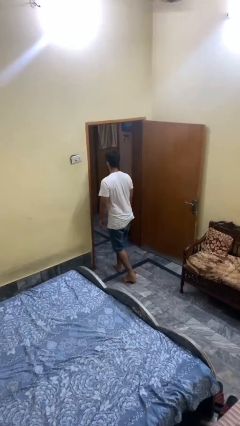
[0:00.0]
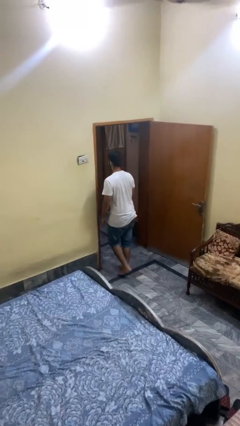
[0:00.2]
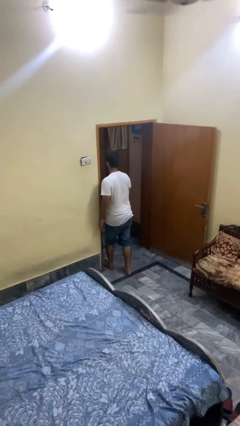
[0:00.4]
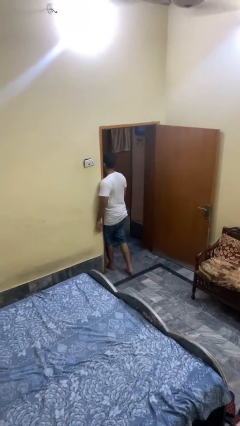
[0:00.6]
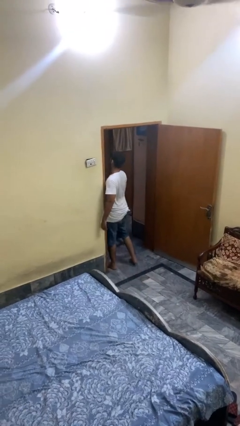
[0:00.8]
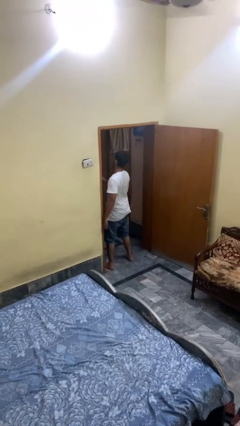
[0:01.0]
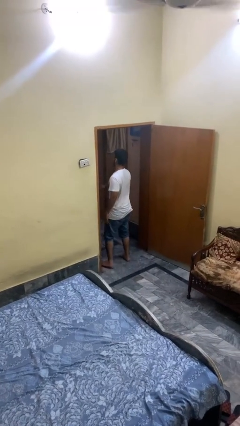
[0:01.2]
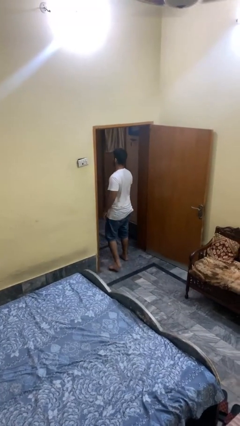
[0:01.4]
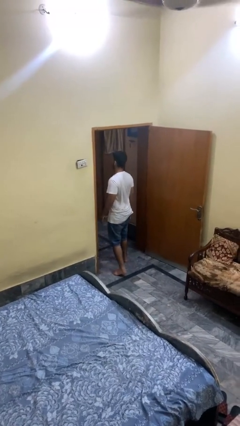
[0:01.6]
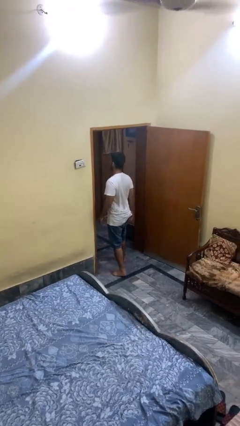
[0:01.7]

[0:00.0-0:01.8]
person bumps into wall

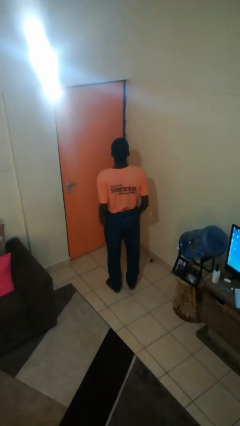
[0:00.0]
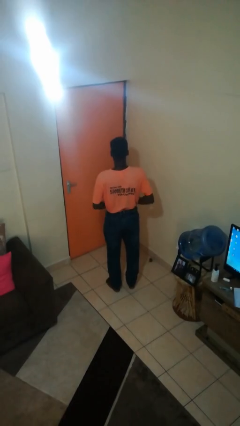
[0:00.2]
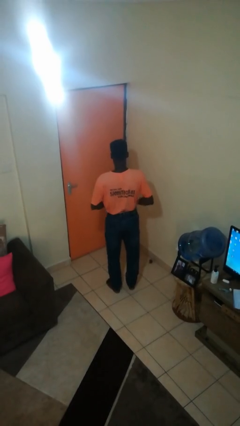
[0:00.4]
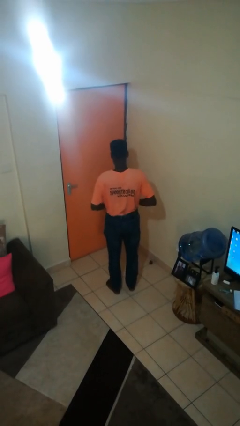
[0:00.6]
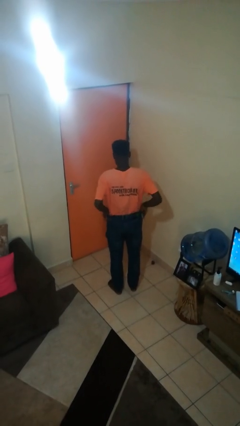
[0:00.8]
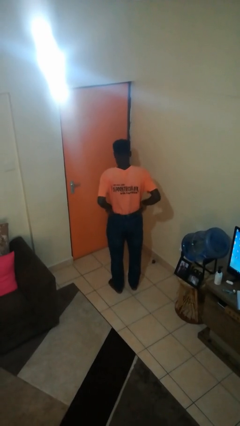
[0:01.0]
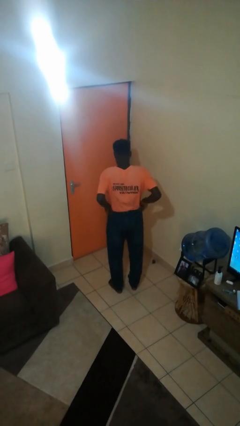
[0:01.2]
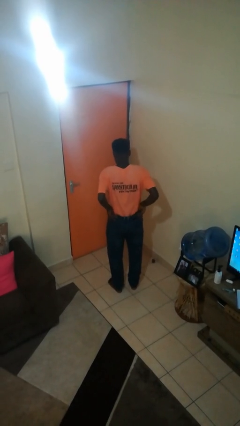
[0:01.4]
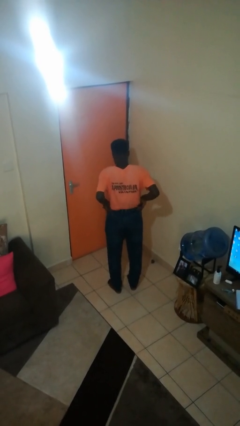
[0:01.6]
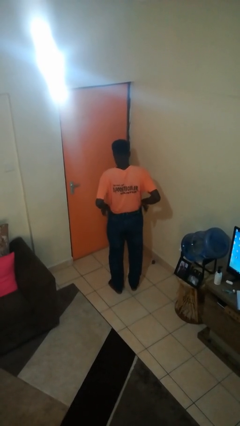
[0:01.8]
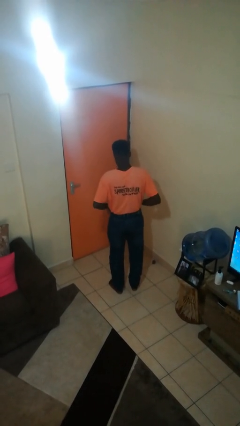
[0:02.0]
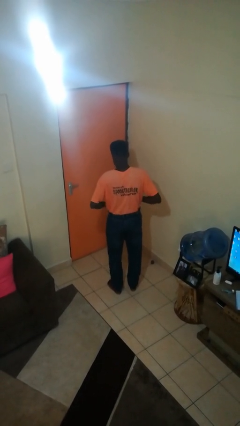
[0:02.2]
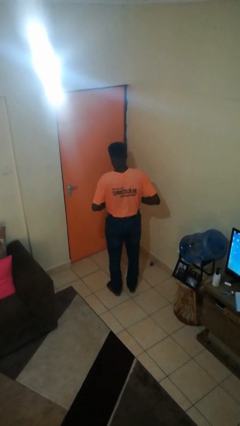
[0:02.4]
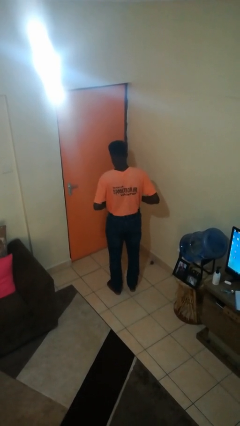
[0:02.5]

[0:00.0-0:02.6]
person hikes up pants

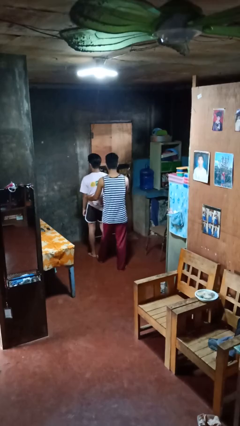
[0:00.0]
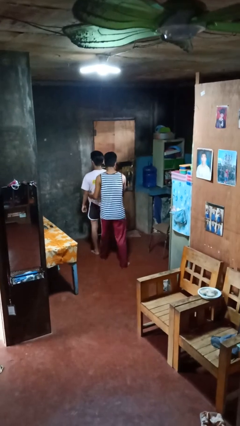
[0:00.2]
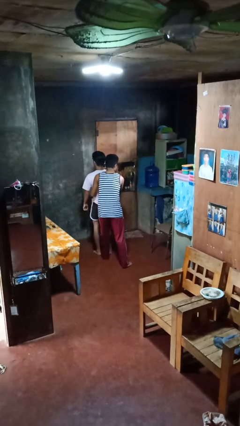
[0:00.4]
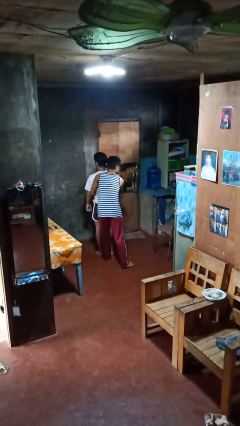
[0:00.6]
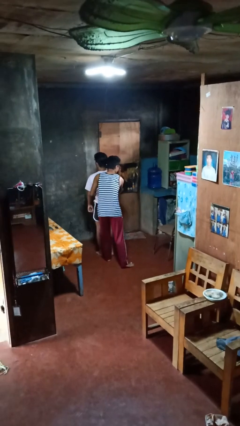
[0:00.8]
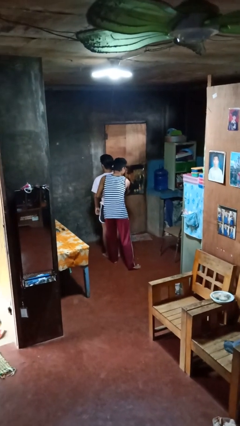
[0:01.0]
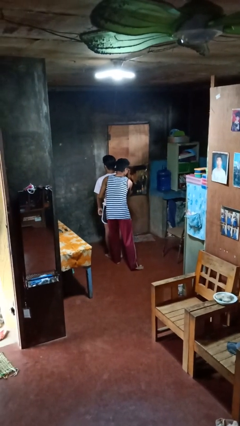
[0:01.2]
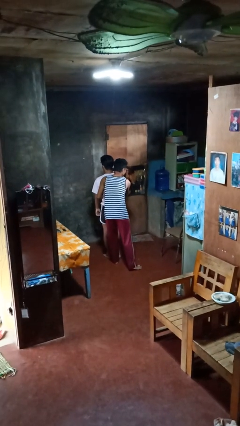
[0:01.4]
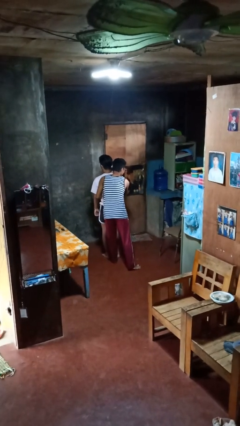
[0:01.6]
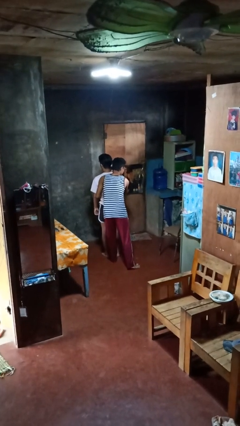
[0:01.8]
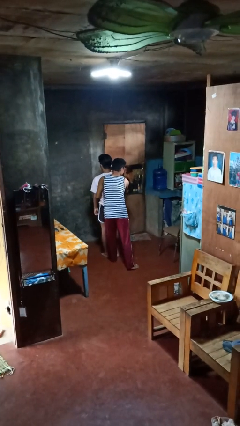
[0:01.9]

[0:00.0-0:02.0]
person hugs person from behind

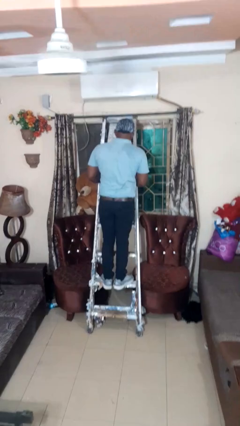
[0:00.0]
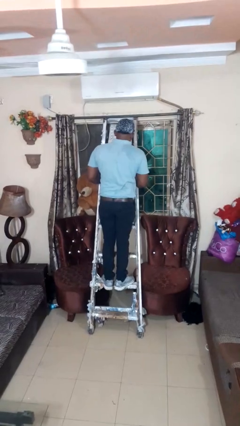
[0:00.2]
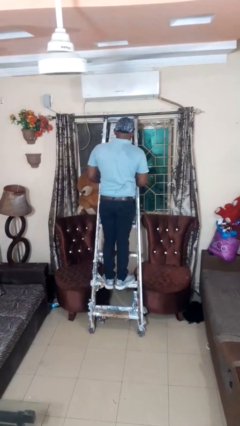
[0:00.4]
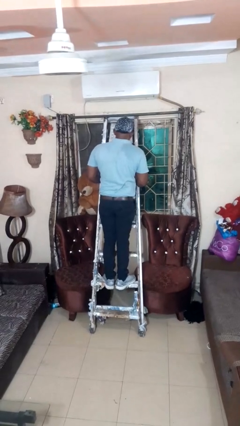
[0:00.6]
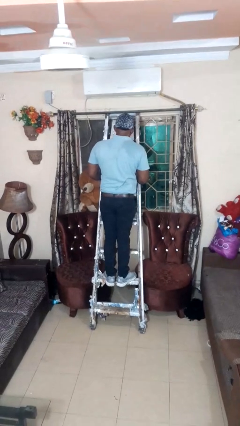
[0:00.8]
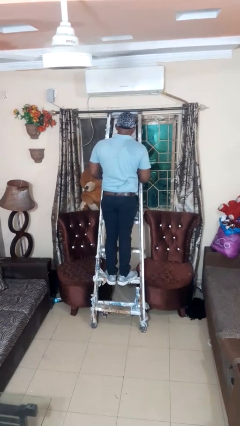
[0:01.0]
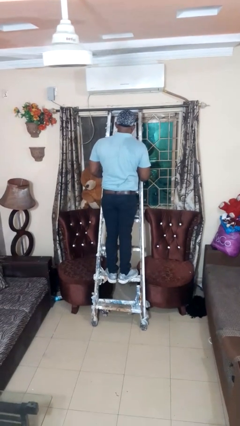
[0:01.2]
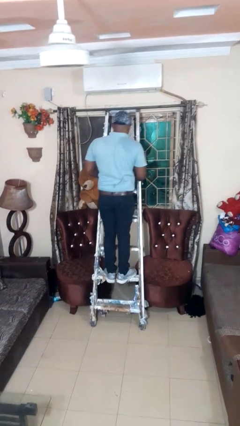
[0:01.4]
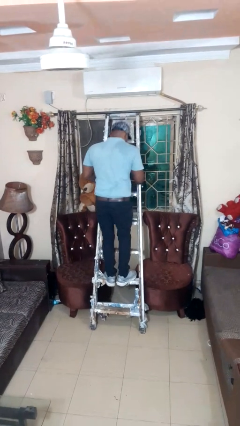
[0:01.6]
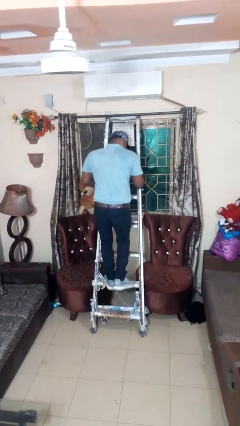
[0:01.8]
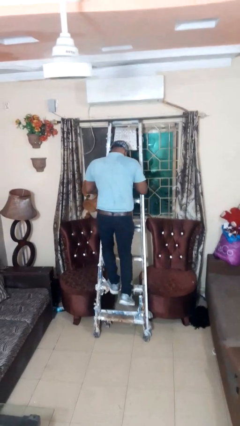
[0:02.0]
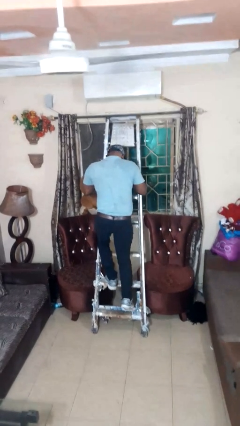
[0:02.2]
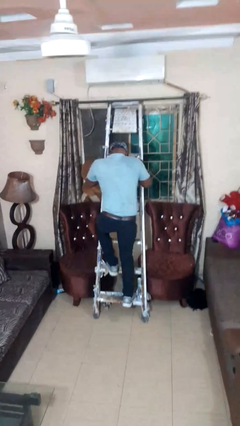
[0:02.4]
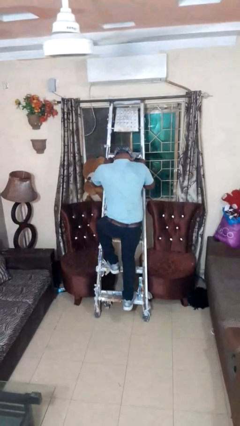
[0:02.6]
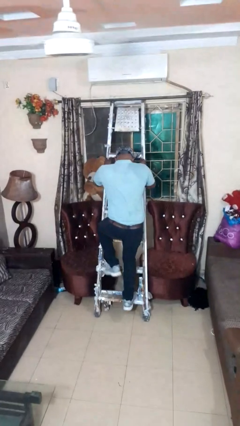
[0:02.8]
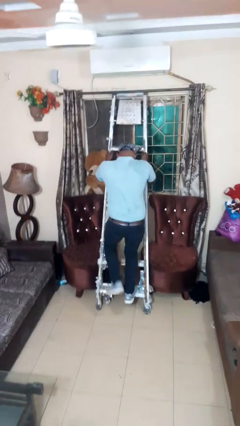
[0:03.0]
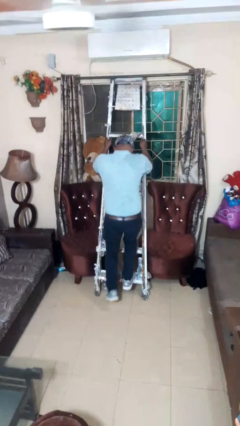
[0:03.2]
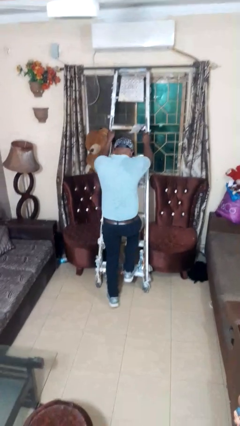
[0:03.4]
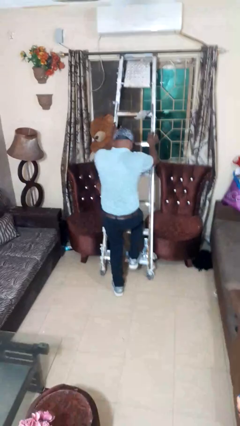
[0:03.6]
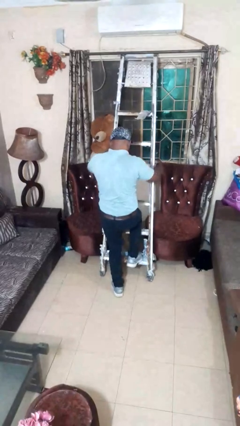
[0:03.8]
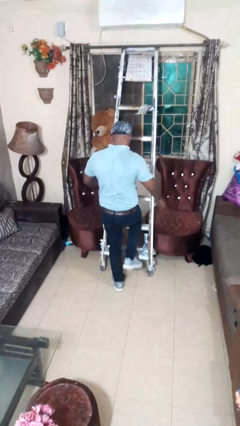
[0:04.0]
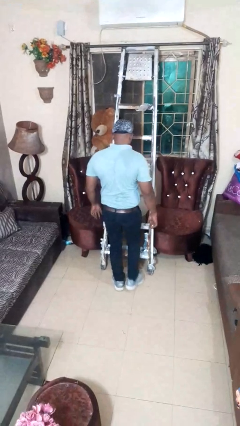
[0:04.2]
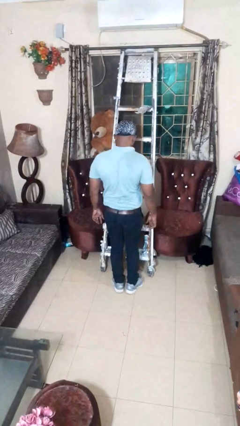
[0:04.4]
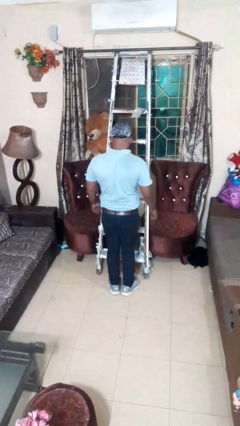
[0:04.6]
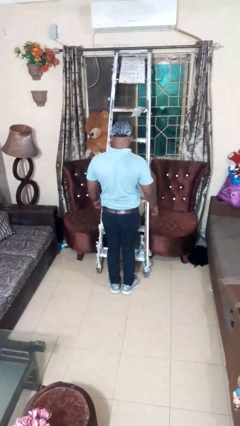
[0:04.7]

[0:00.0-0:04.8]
person climbs down ladder

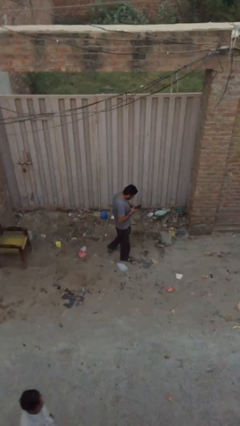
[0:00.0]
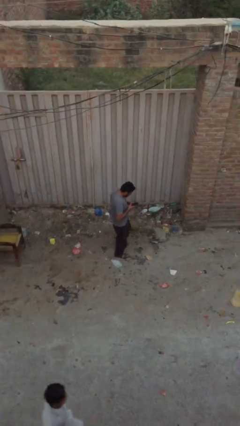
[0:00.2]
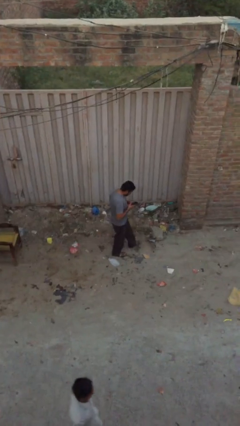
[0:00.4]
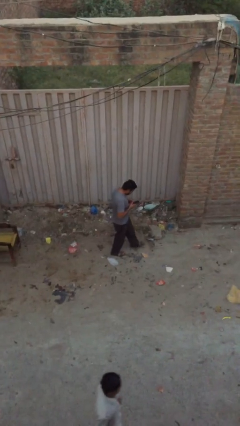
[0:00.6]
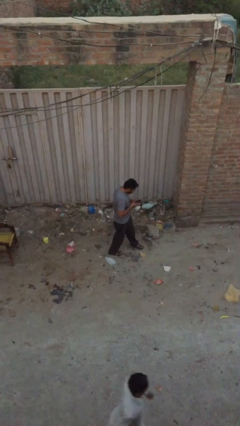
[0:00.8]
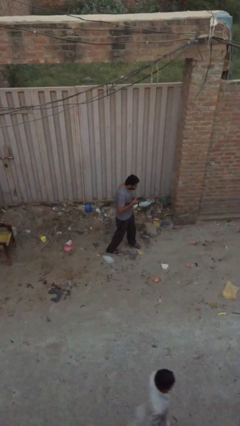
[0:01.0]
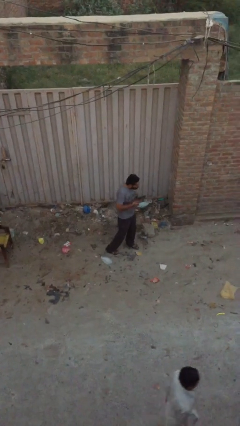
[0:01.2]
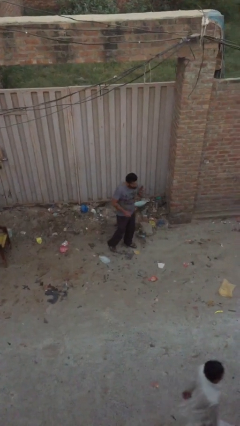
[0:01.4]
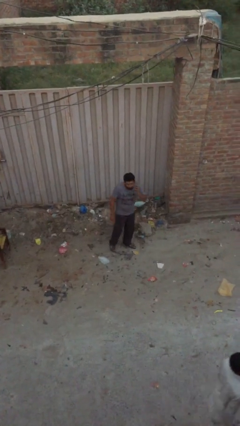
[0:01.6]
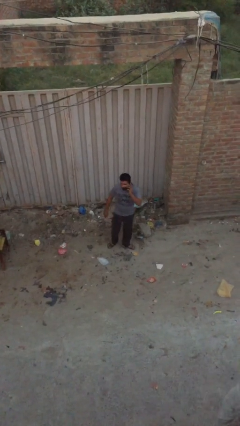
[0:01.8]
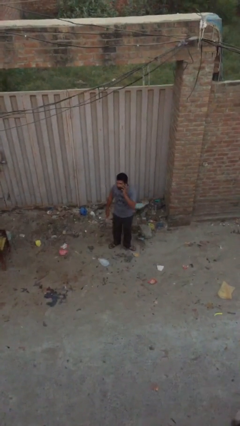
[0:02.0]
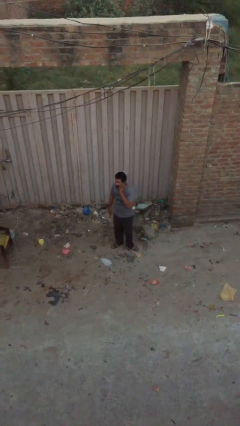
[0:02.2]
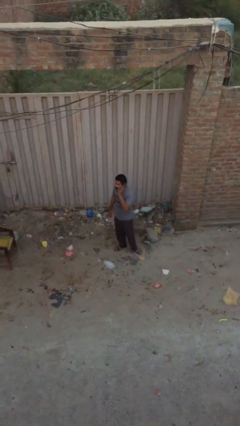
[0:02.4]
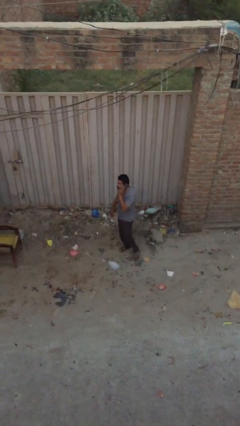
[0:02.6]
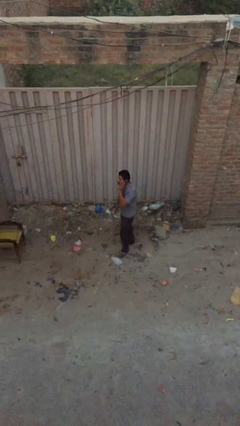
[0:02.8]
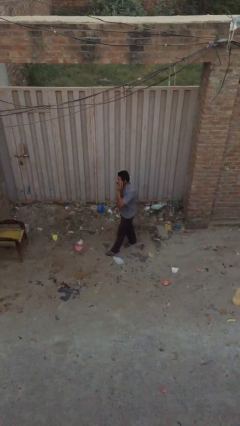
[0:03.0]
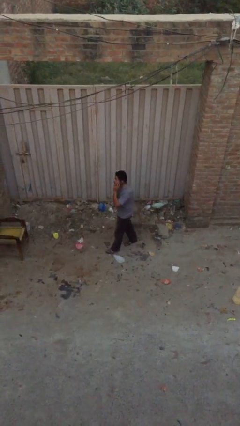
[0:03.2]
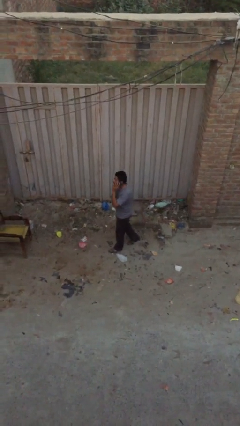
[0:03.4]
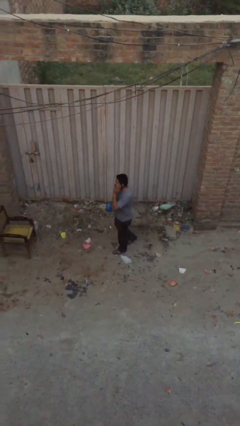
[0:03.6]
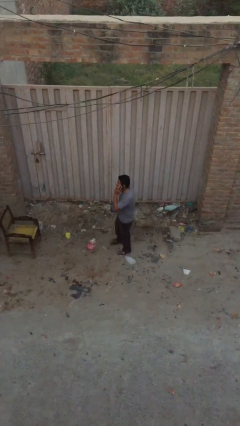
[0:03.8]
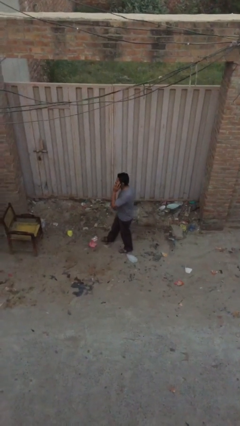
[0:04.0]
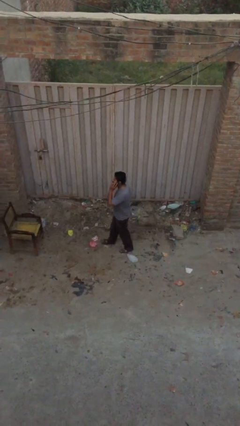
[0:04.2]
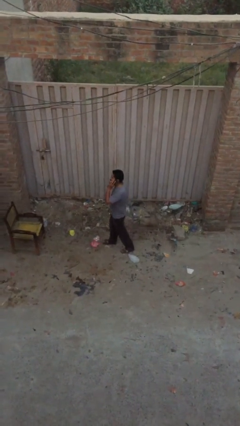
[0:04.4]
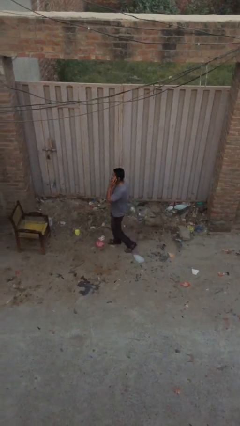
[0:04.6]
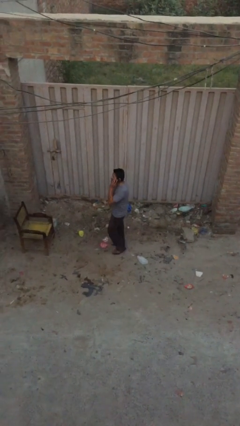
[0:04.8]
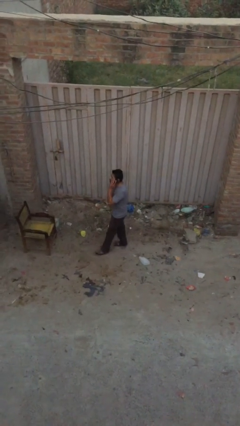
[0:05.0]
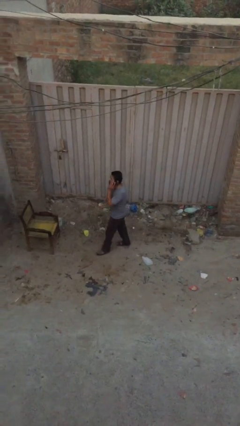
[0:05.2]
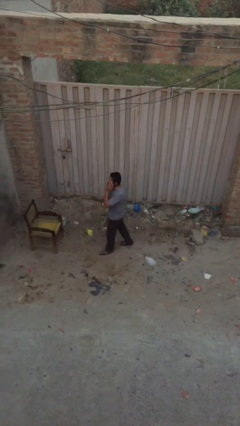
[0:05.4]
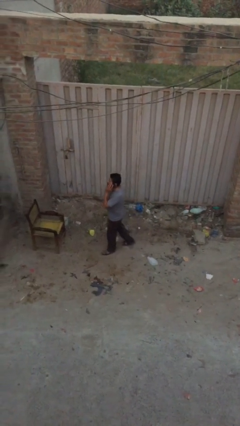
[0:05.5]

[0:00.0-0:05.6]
person talks on phone

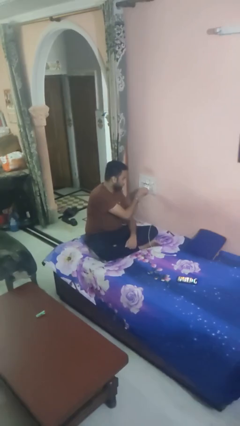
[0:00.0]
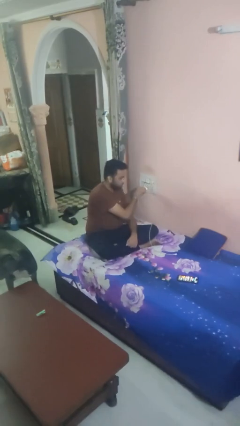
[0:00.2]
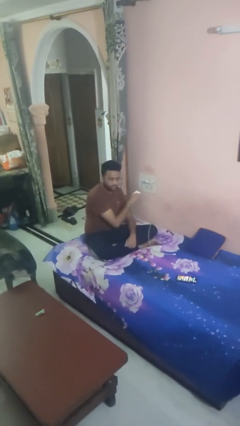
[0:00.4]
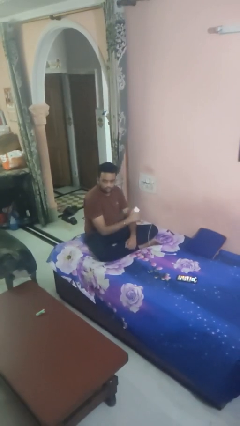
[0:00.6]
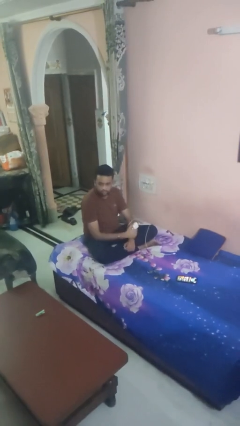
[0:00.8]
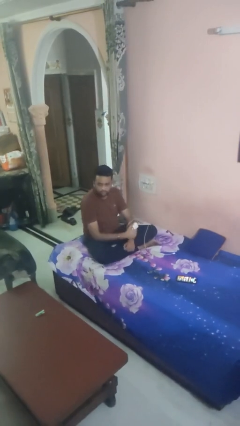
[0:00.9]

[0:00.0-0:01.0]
person unplugs from electrical socket
